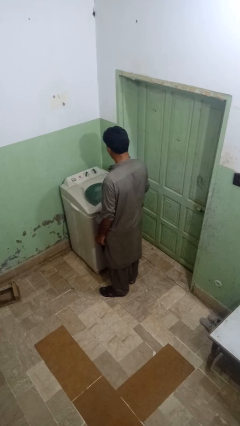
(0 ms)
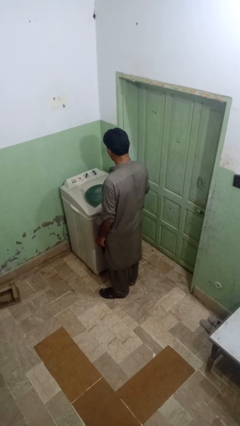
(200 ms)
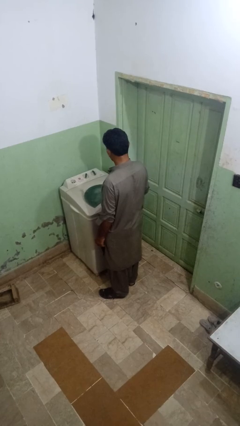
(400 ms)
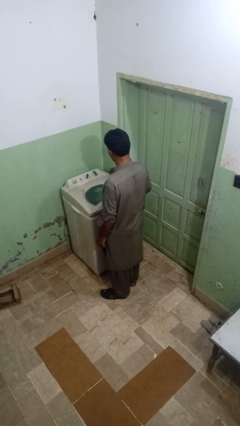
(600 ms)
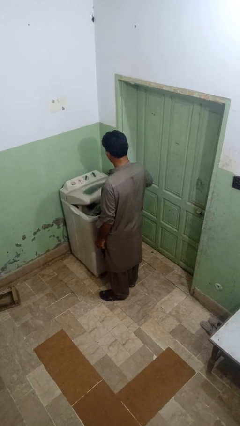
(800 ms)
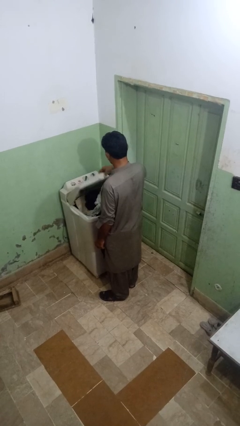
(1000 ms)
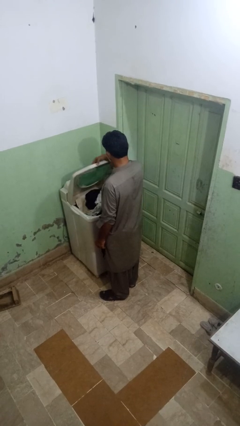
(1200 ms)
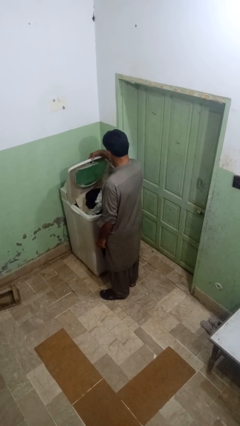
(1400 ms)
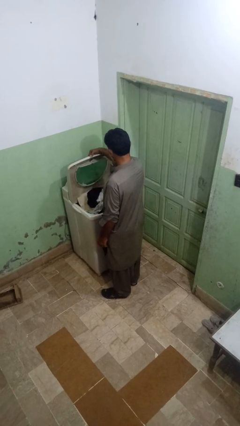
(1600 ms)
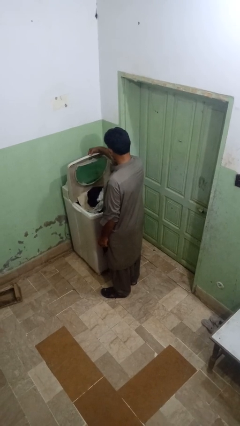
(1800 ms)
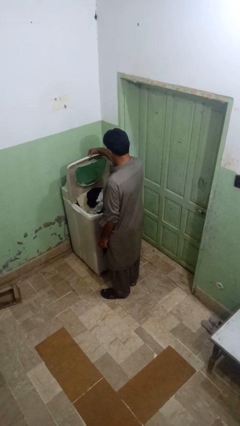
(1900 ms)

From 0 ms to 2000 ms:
person opens clothes washer

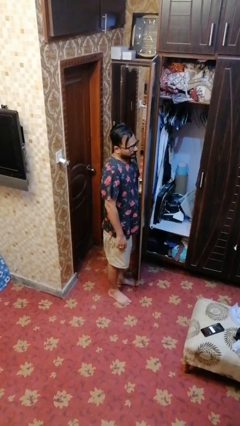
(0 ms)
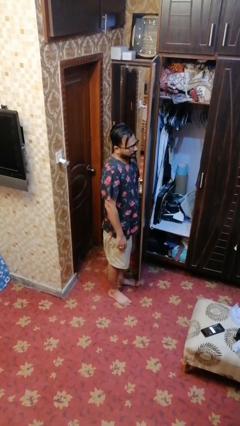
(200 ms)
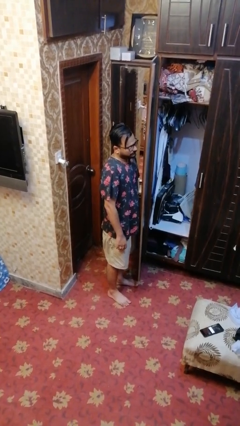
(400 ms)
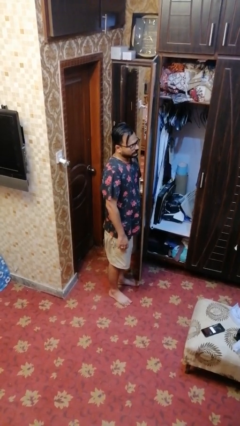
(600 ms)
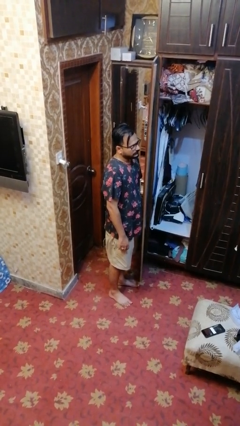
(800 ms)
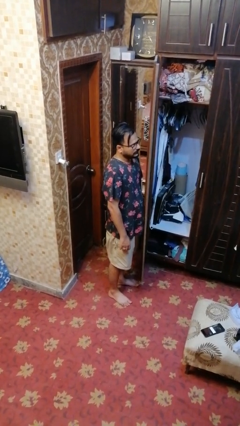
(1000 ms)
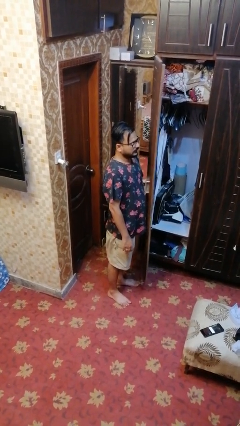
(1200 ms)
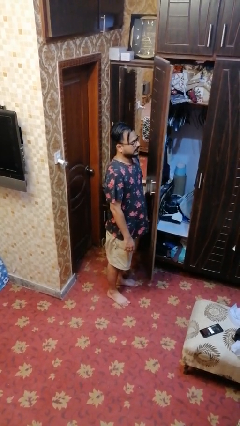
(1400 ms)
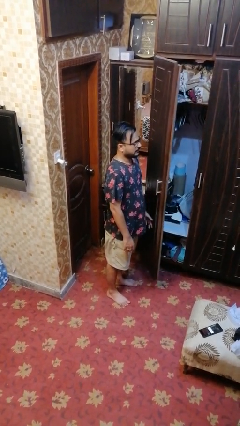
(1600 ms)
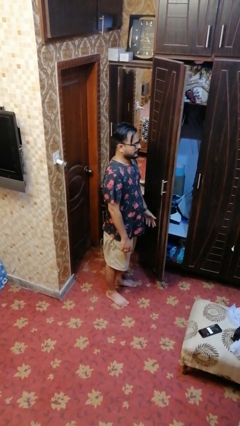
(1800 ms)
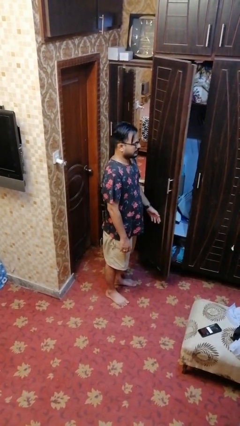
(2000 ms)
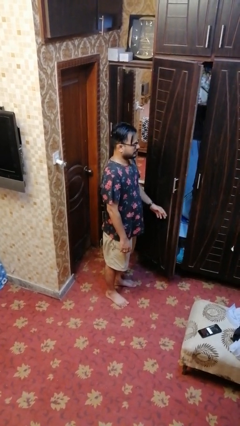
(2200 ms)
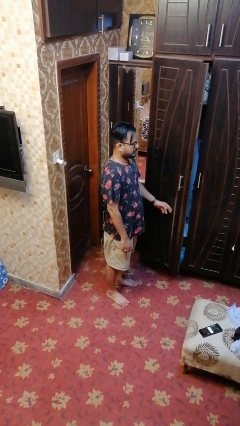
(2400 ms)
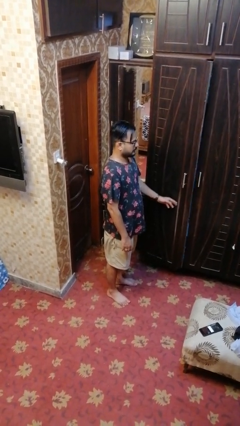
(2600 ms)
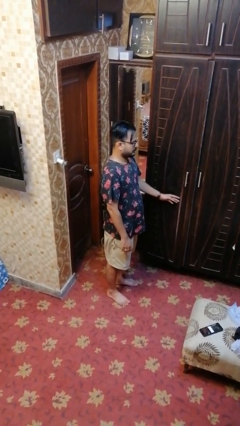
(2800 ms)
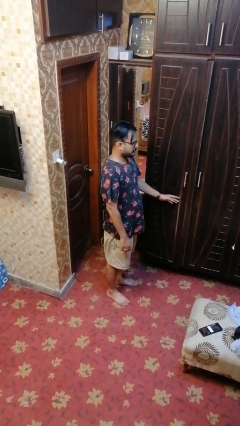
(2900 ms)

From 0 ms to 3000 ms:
person closes closet door

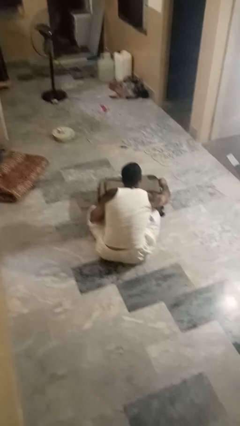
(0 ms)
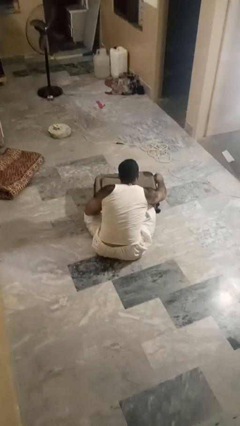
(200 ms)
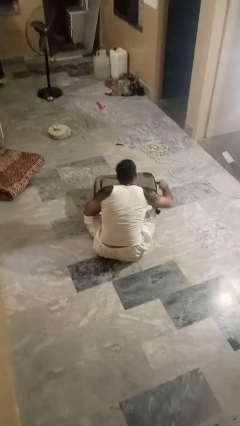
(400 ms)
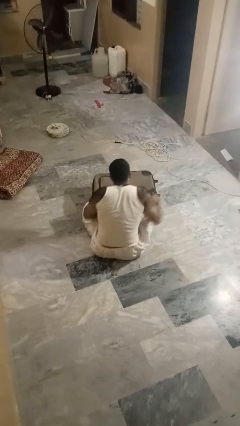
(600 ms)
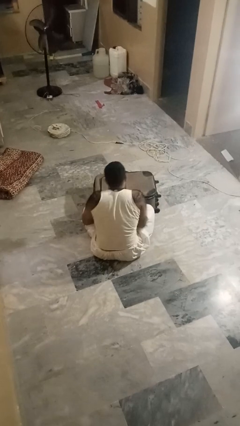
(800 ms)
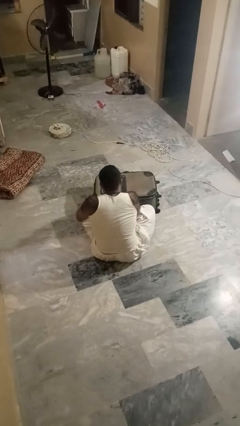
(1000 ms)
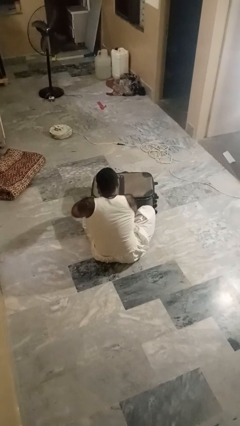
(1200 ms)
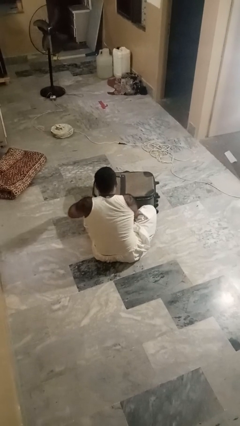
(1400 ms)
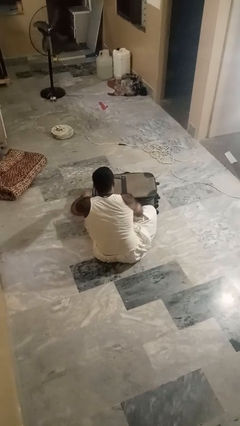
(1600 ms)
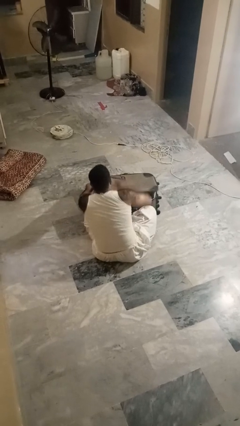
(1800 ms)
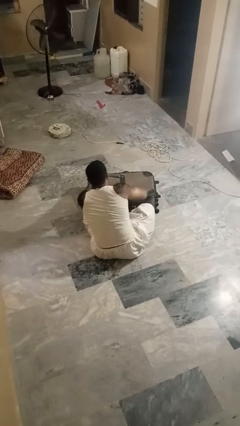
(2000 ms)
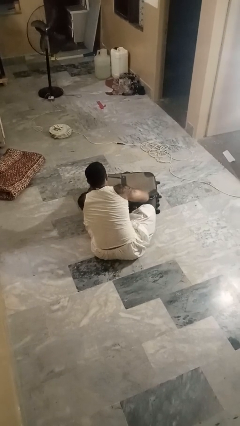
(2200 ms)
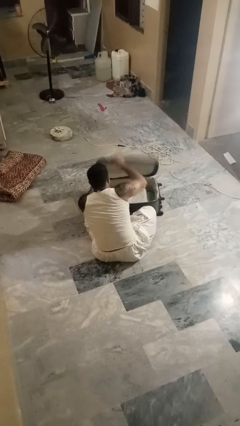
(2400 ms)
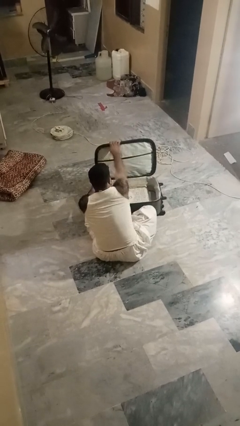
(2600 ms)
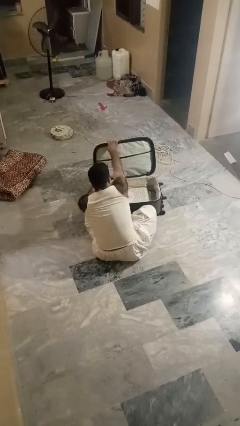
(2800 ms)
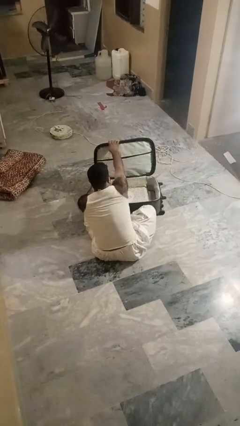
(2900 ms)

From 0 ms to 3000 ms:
person opens suitcase

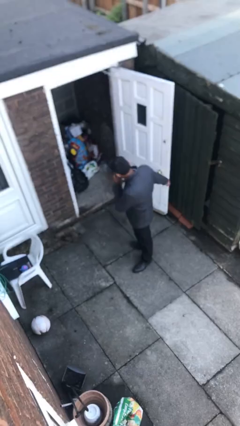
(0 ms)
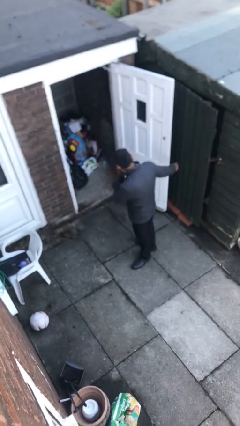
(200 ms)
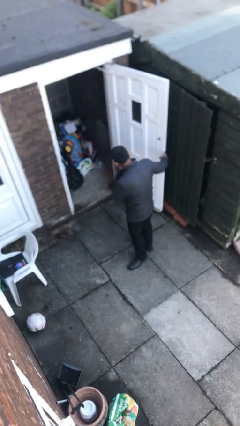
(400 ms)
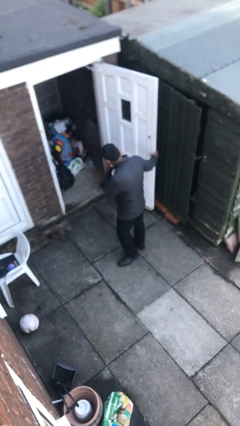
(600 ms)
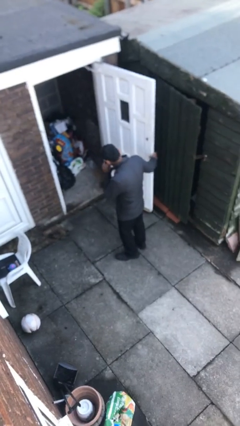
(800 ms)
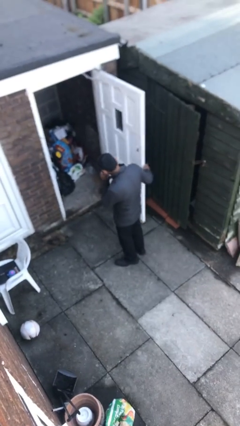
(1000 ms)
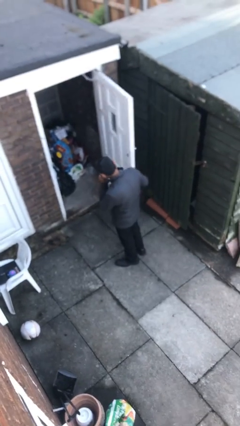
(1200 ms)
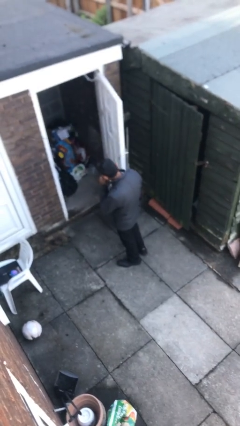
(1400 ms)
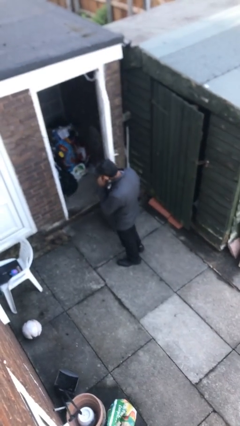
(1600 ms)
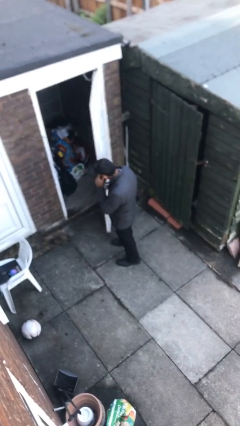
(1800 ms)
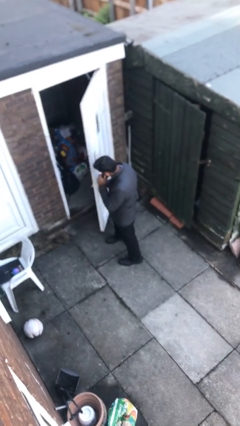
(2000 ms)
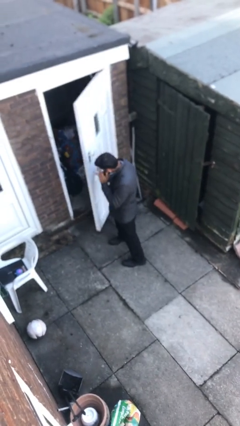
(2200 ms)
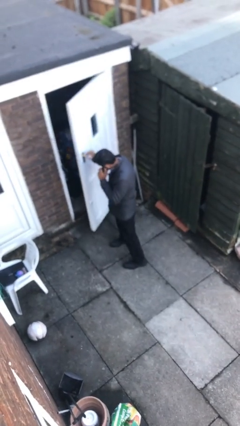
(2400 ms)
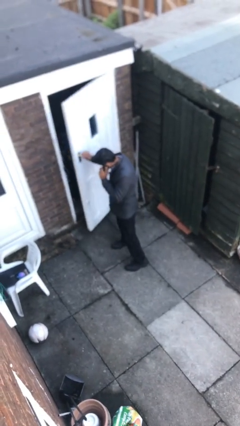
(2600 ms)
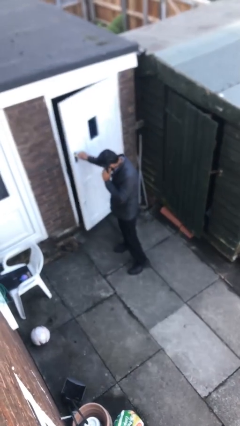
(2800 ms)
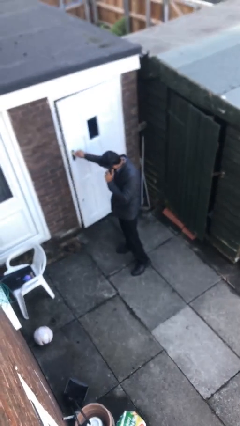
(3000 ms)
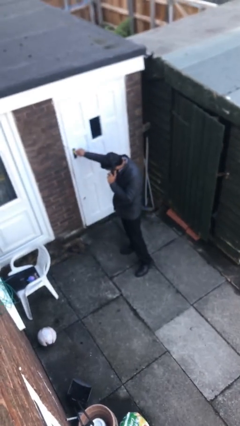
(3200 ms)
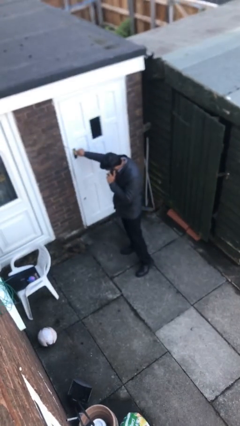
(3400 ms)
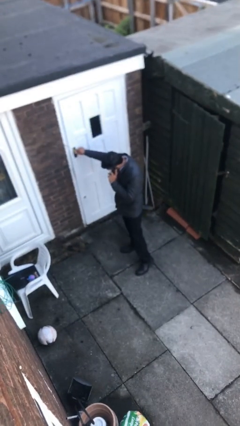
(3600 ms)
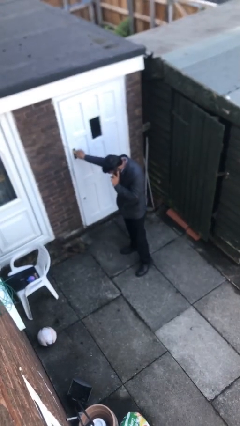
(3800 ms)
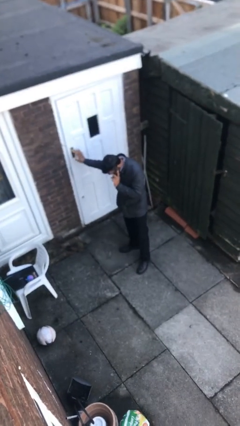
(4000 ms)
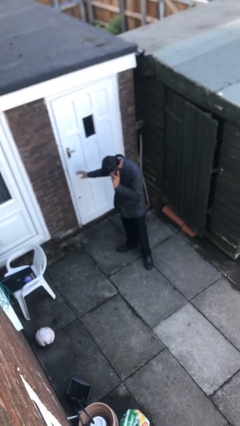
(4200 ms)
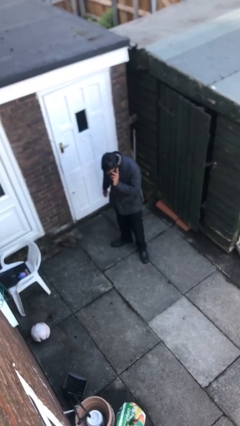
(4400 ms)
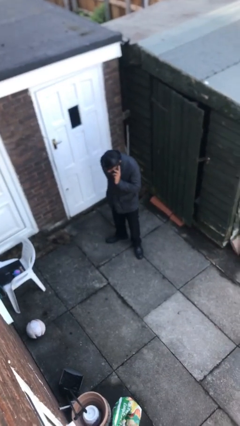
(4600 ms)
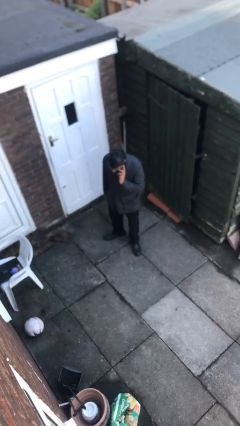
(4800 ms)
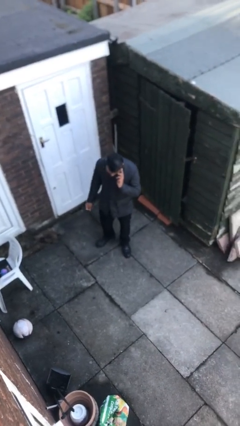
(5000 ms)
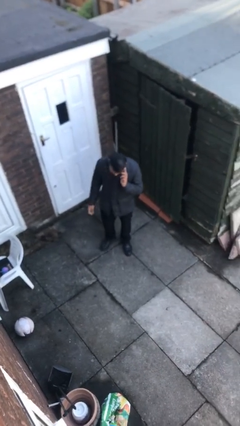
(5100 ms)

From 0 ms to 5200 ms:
person closes facility door

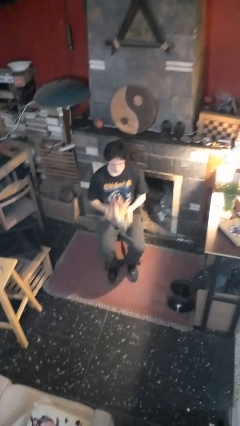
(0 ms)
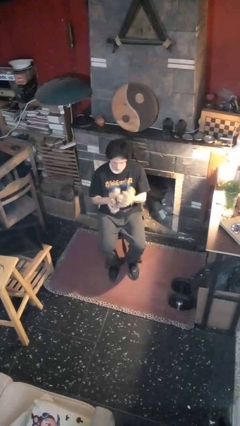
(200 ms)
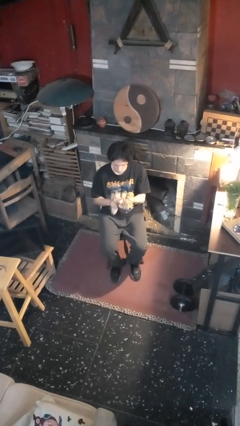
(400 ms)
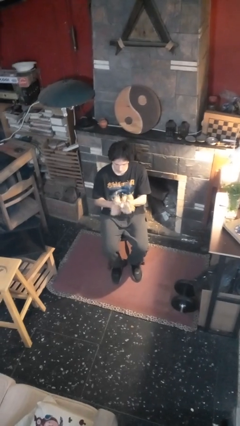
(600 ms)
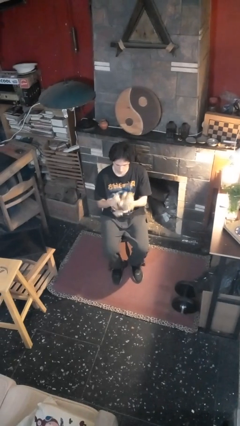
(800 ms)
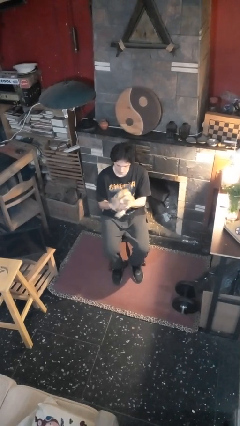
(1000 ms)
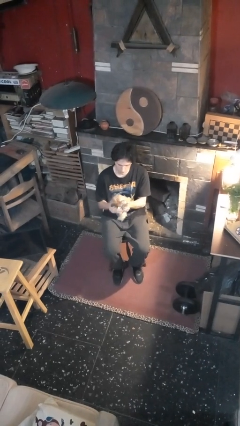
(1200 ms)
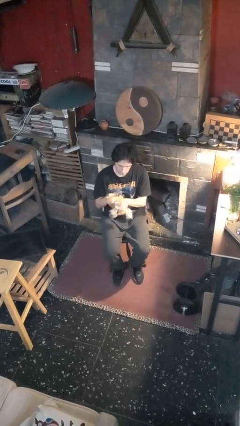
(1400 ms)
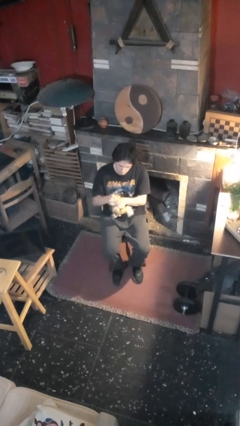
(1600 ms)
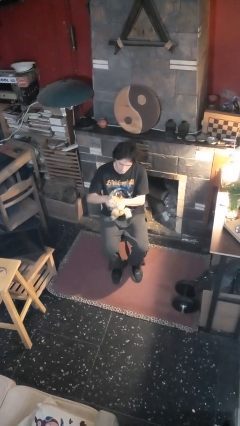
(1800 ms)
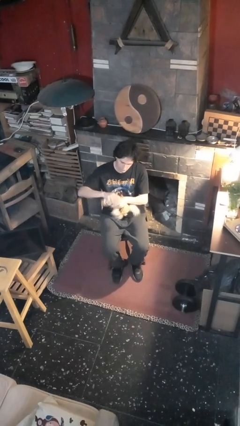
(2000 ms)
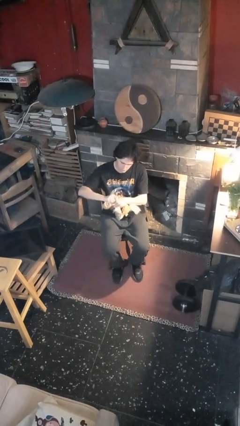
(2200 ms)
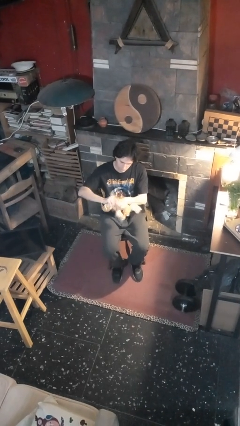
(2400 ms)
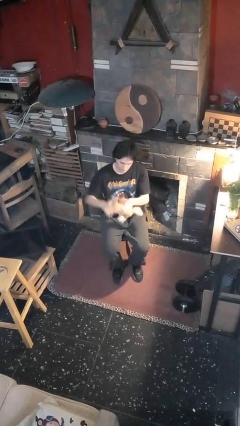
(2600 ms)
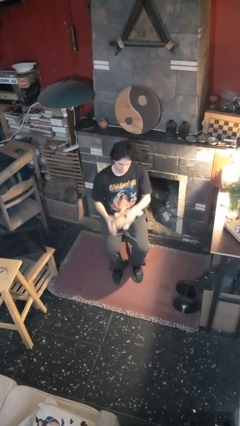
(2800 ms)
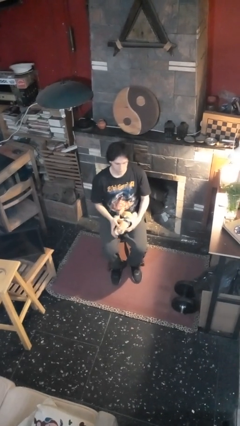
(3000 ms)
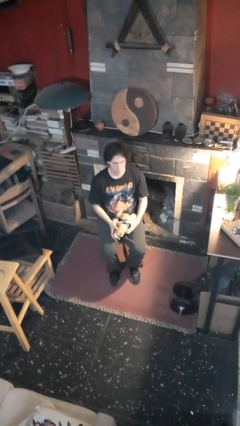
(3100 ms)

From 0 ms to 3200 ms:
person squeezes object

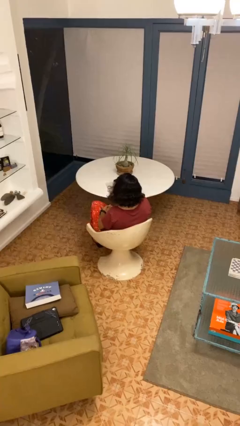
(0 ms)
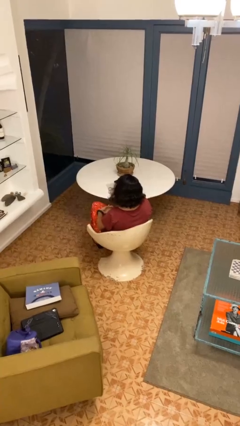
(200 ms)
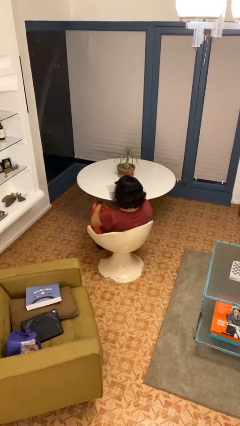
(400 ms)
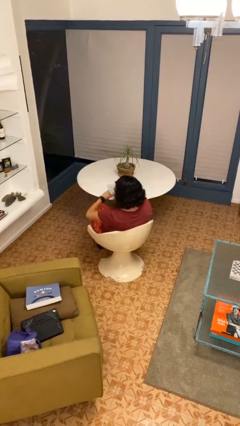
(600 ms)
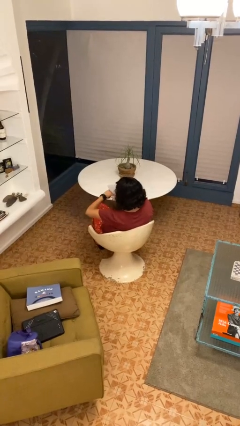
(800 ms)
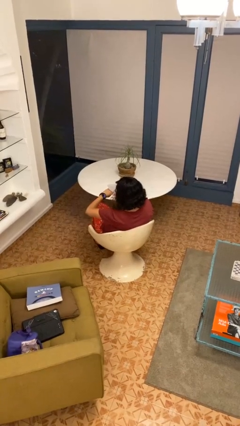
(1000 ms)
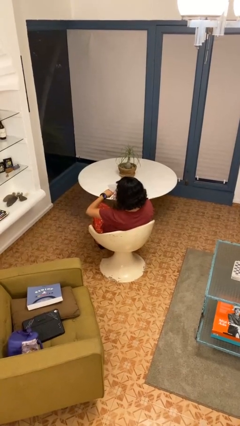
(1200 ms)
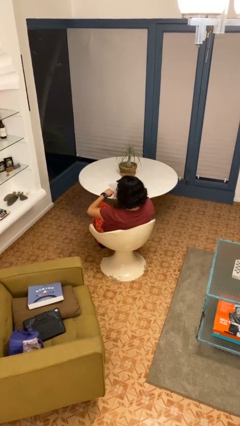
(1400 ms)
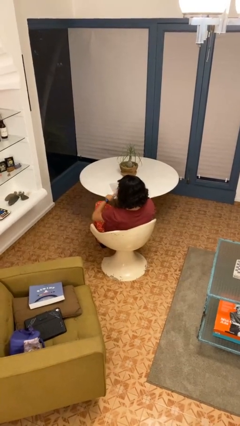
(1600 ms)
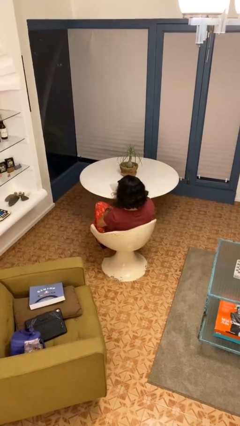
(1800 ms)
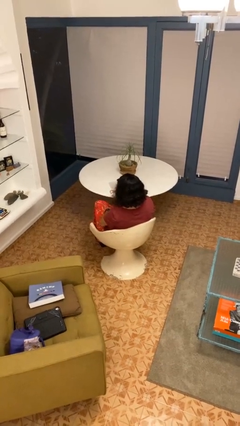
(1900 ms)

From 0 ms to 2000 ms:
person looks at wristwatch
